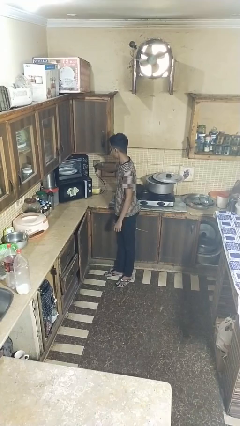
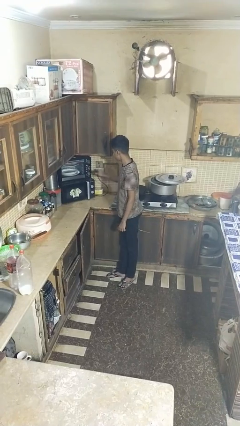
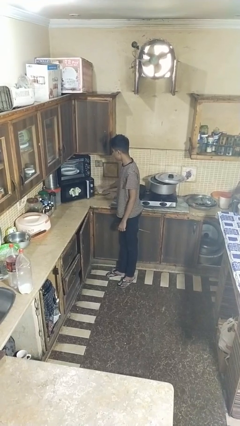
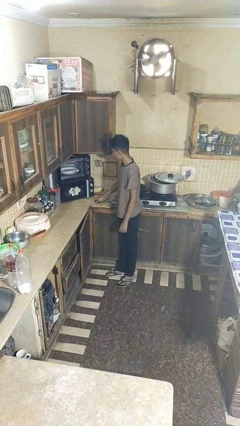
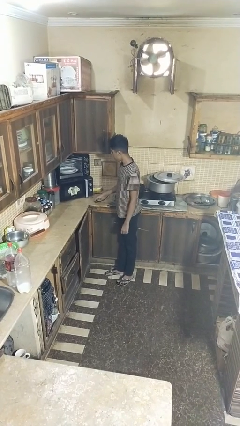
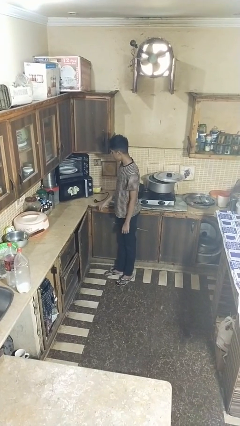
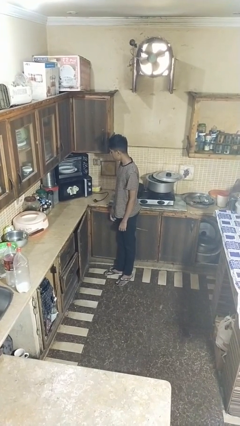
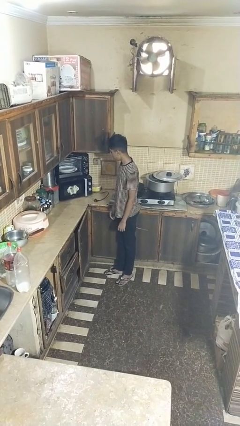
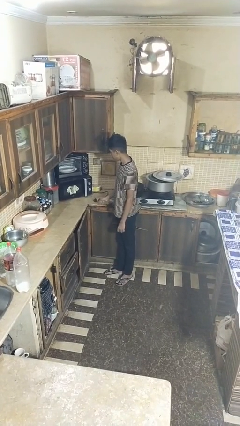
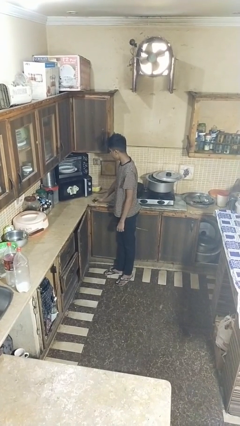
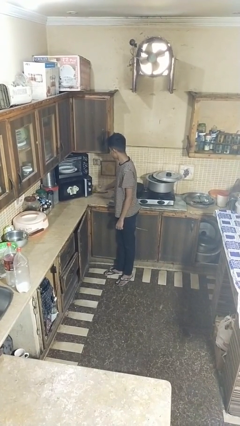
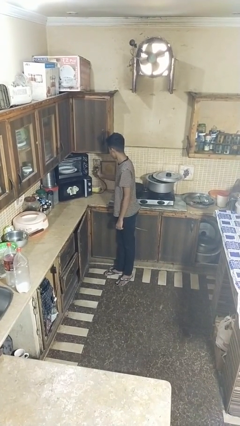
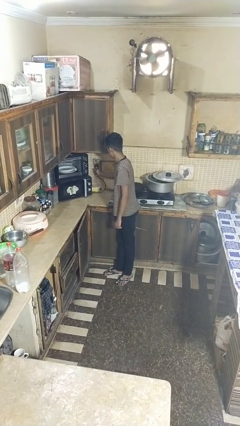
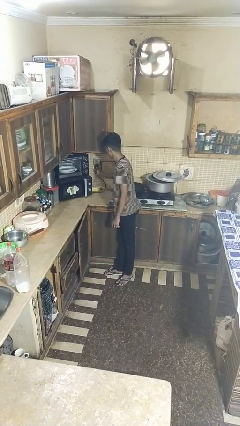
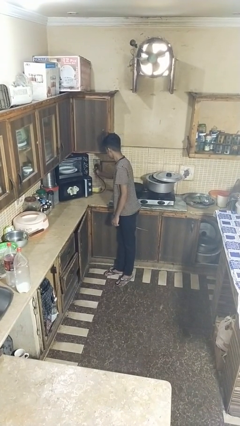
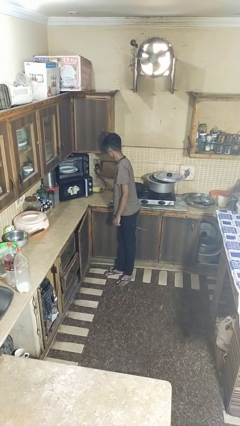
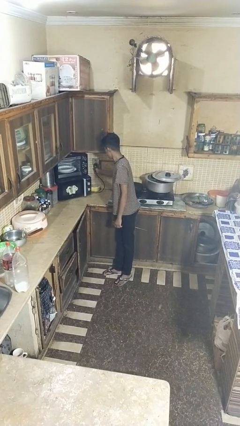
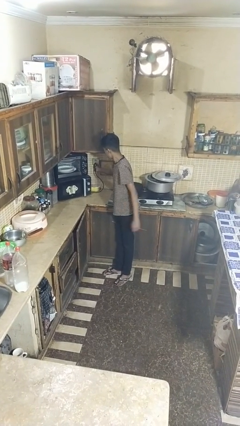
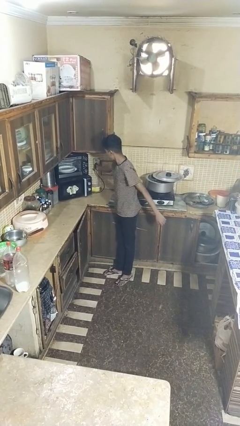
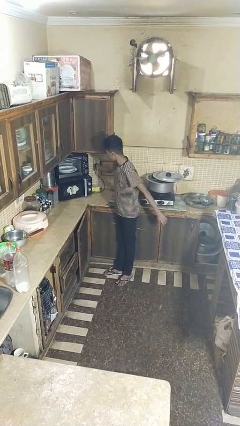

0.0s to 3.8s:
person plugs into electrical socket

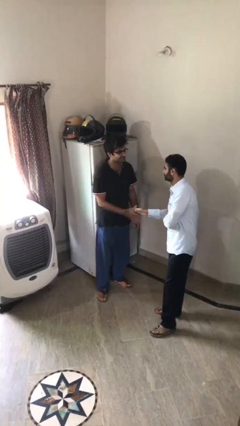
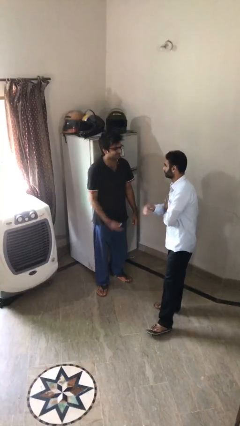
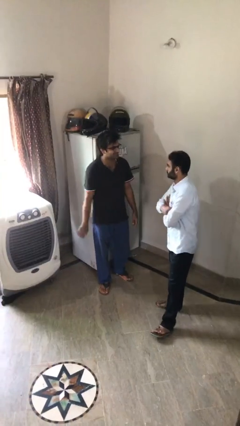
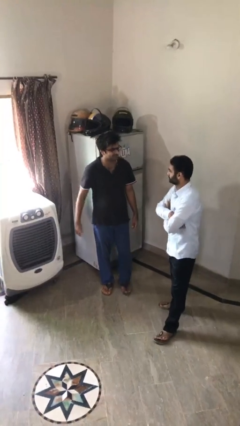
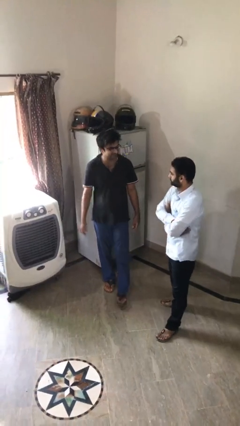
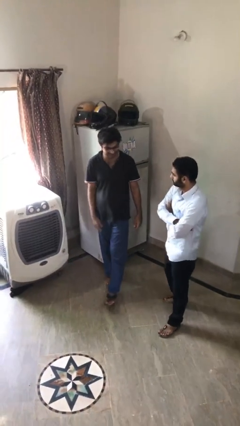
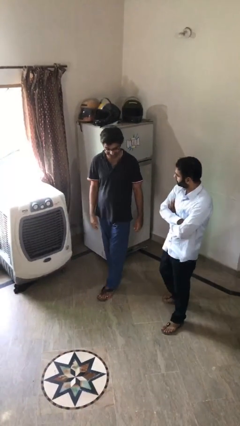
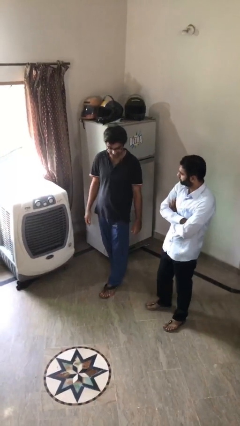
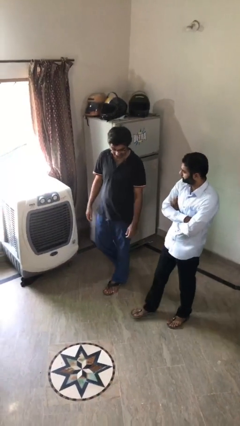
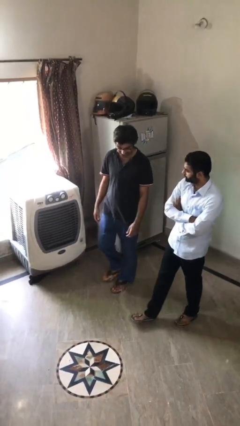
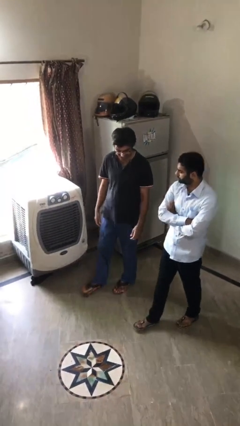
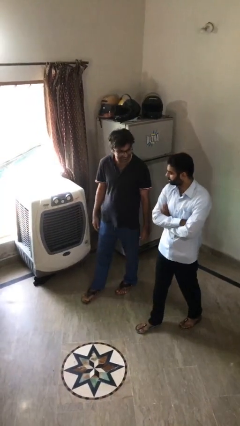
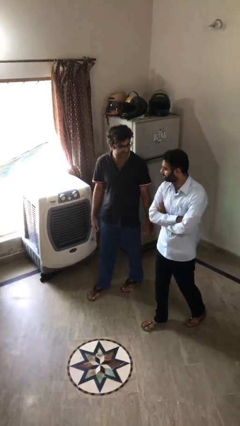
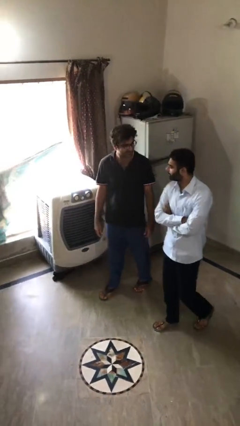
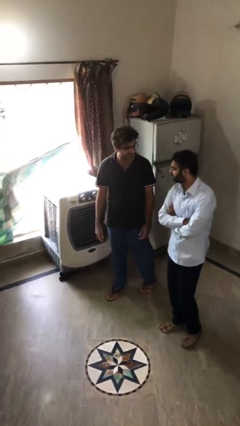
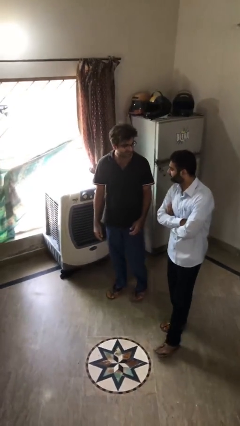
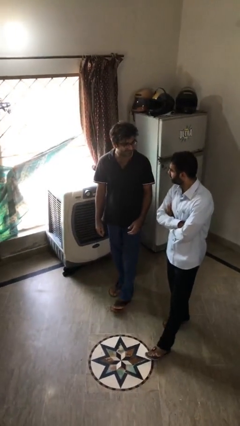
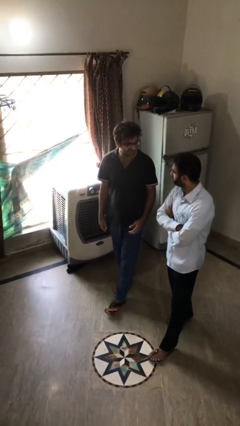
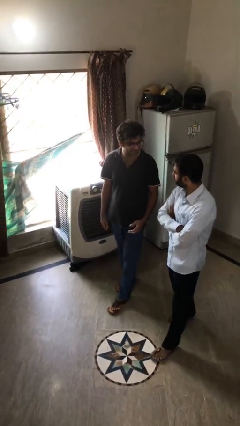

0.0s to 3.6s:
person talks to person

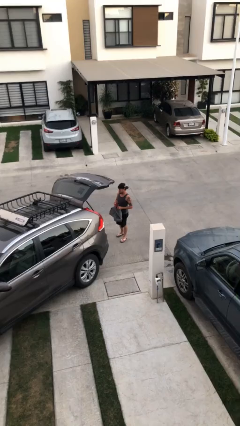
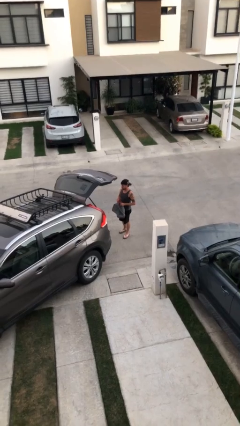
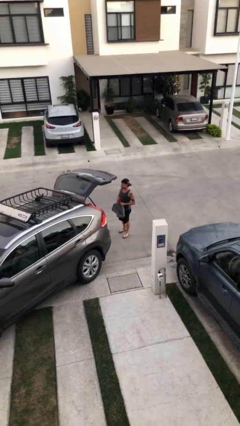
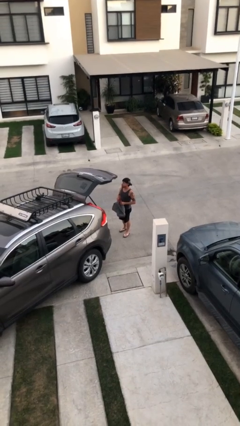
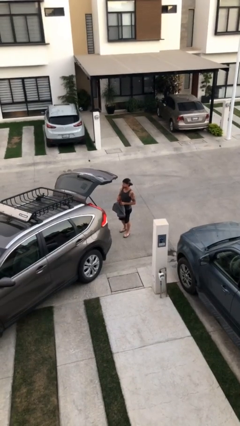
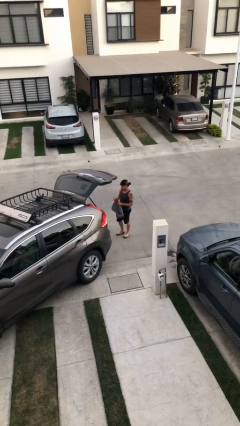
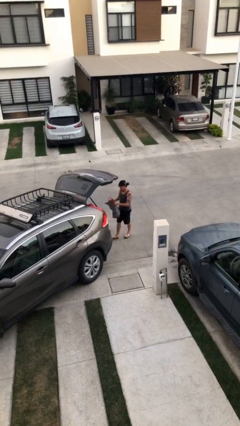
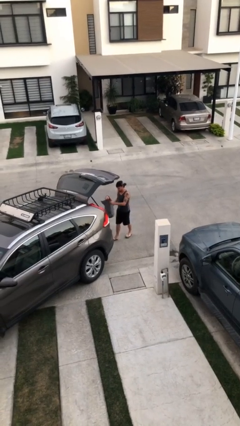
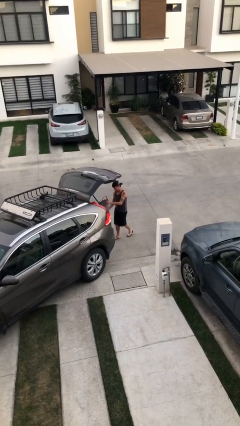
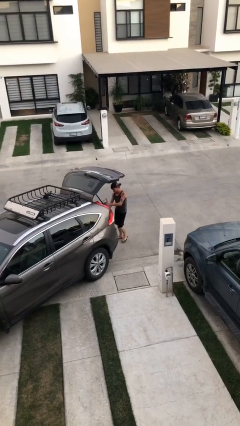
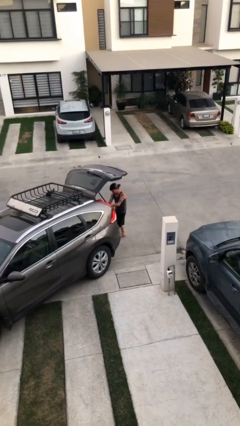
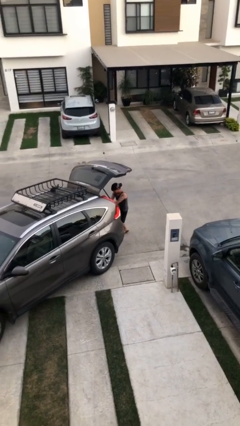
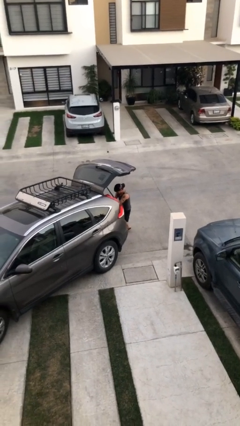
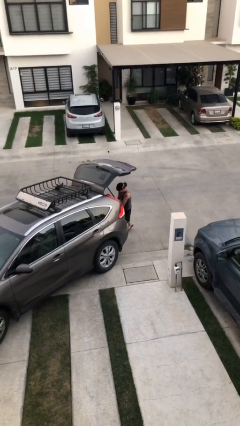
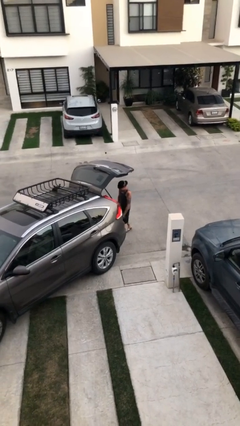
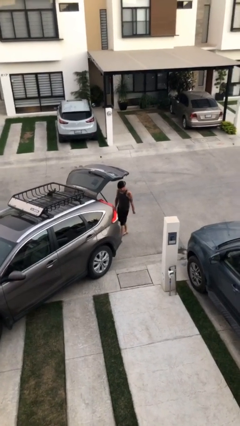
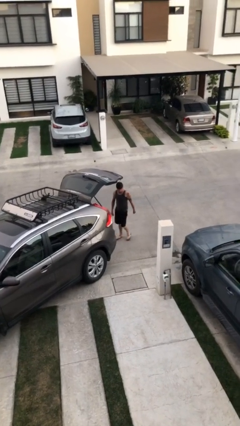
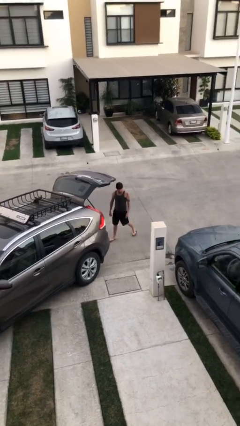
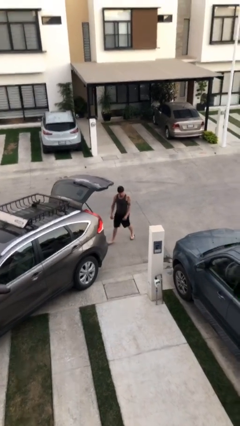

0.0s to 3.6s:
person loads car

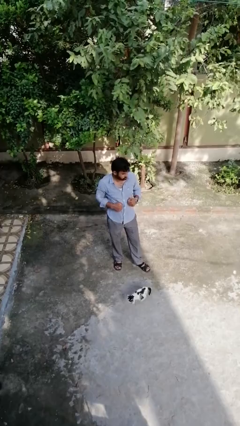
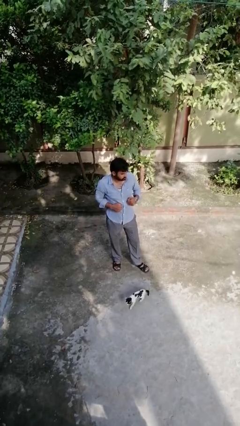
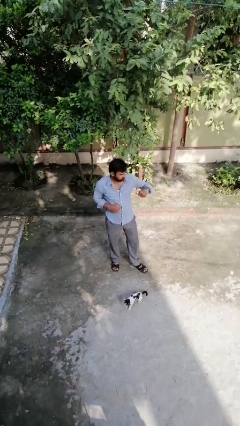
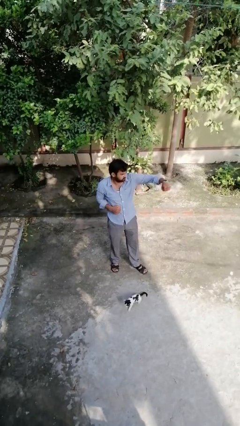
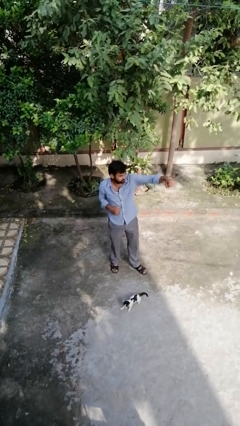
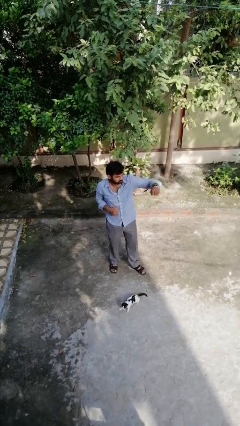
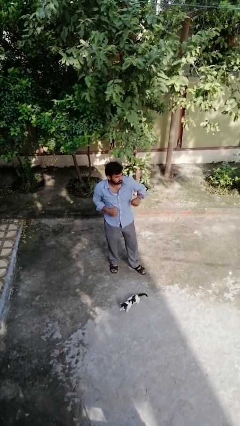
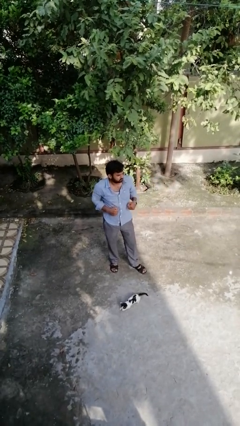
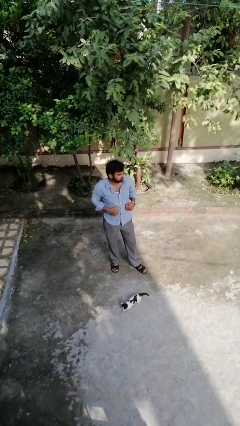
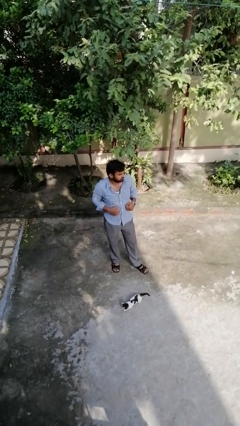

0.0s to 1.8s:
person punches

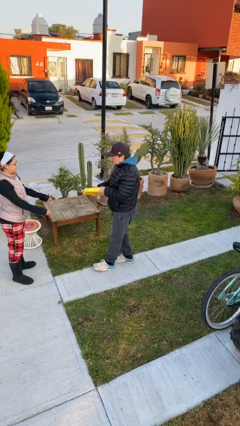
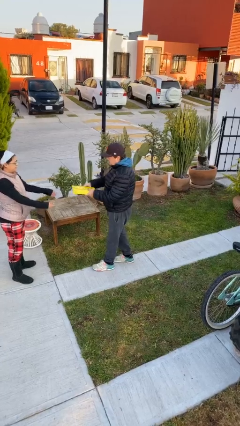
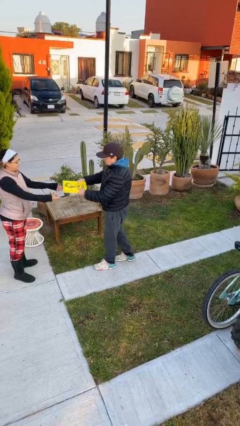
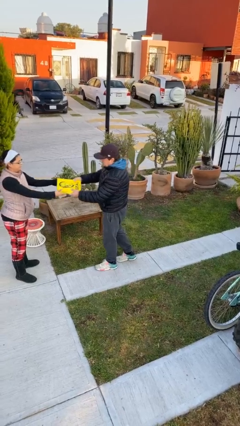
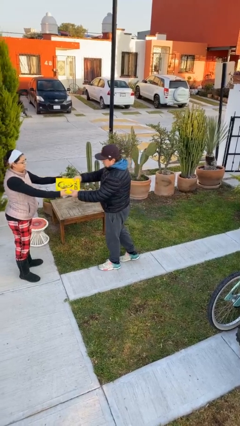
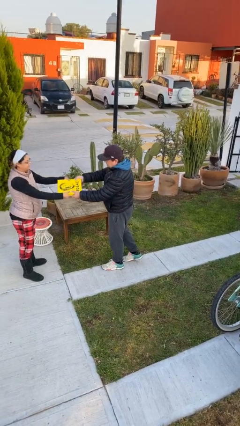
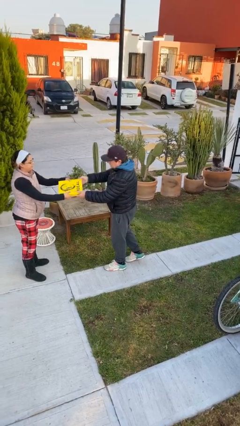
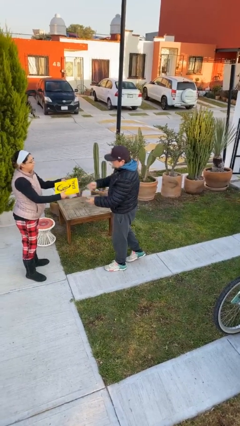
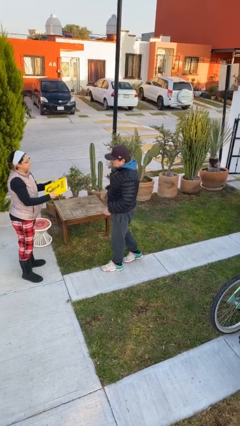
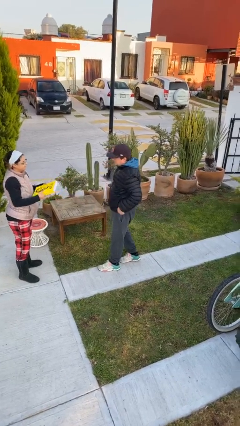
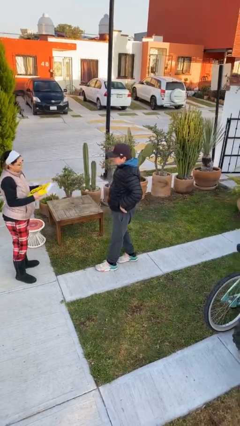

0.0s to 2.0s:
person transfers object to person

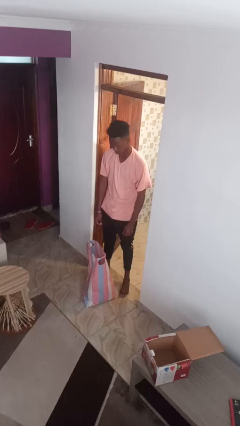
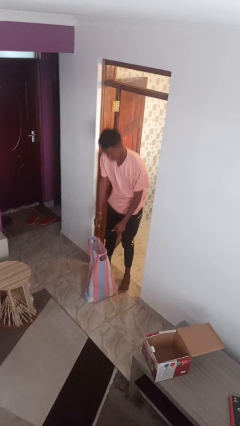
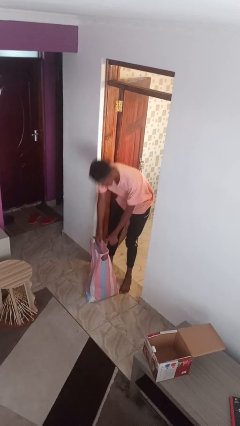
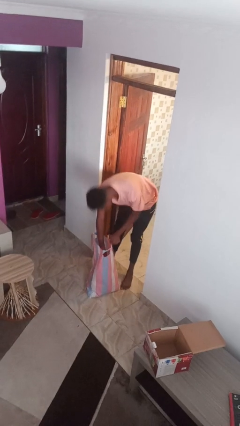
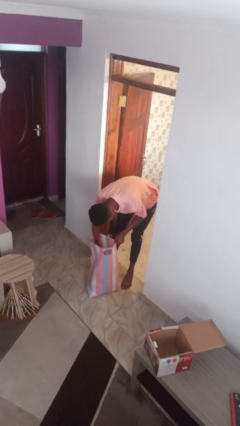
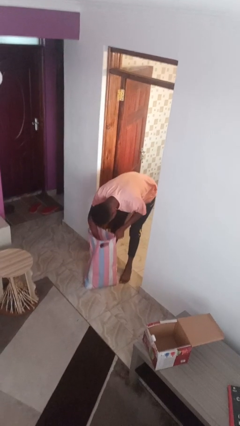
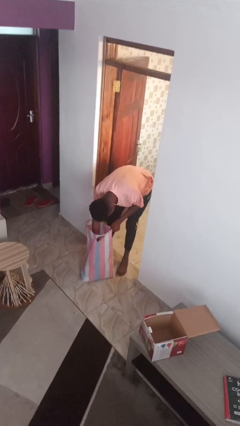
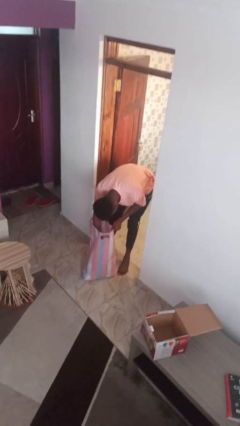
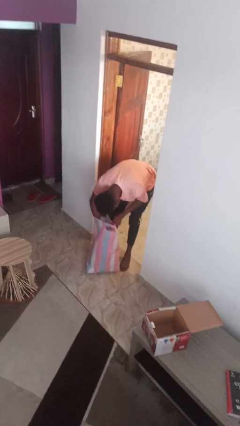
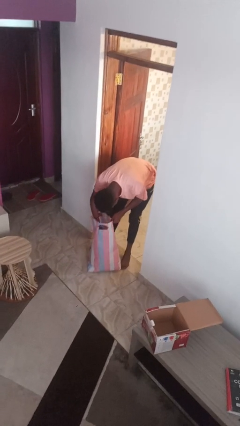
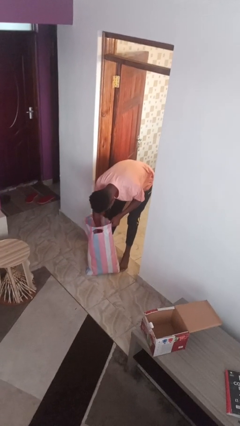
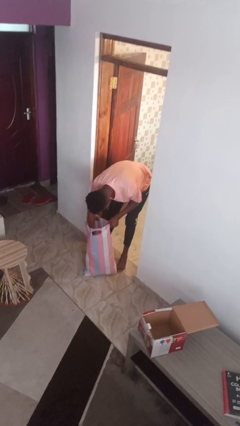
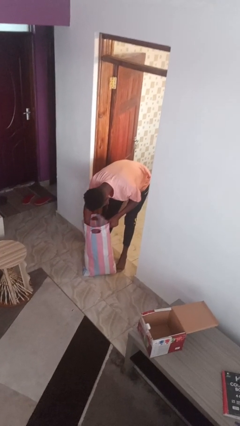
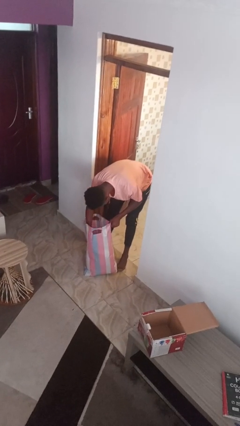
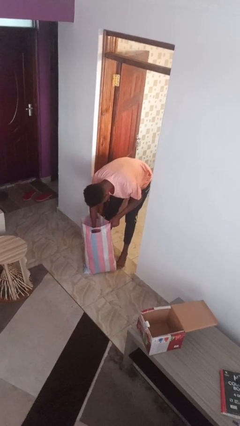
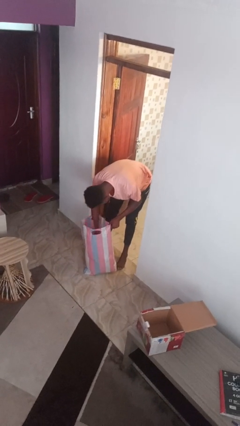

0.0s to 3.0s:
person searches in bag
